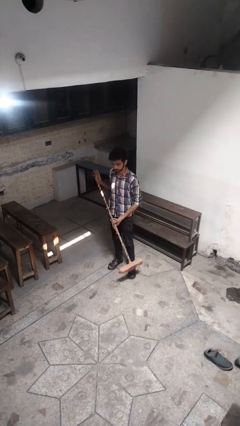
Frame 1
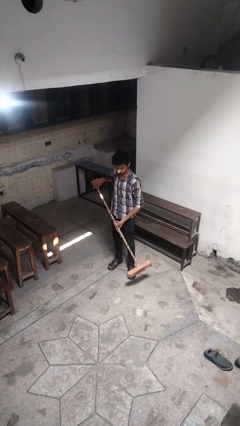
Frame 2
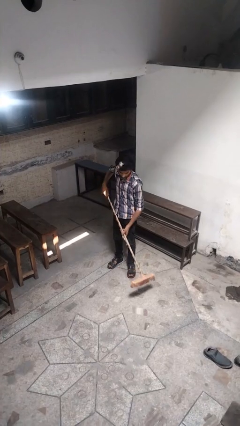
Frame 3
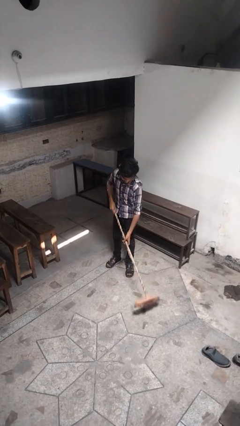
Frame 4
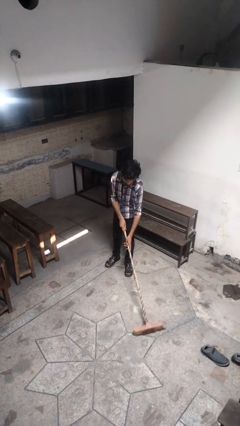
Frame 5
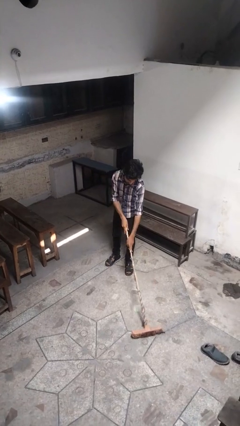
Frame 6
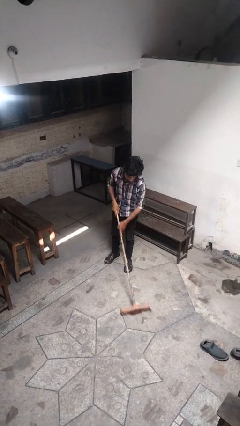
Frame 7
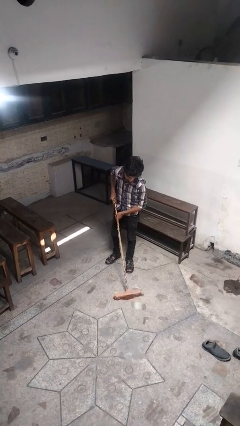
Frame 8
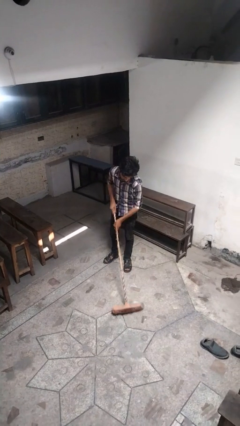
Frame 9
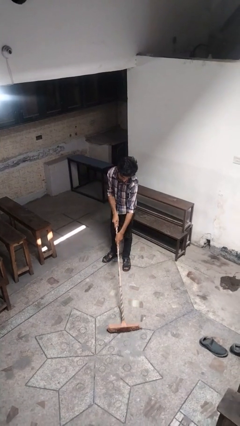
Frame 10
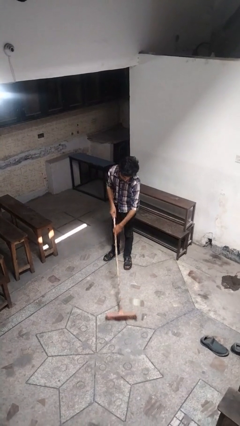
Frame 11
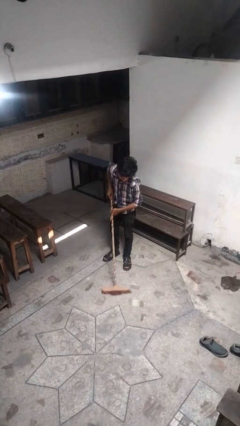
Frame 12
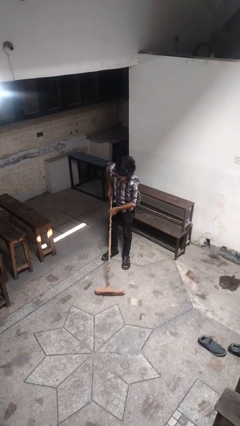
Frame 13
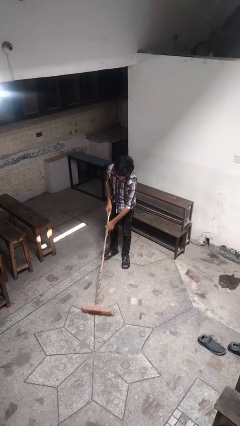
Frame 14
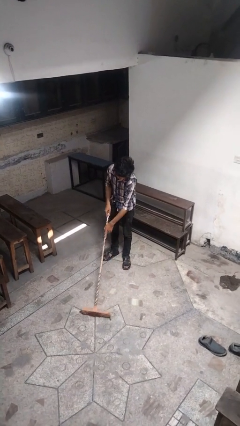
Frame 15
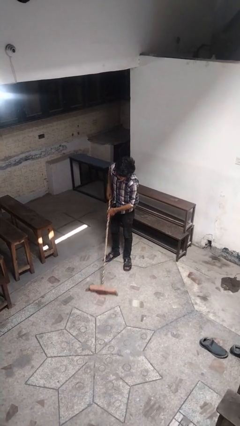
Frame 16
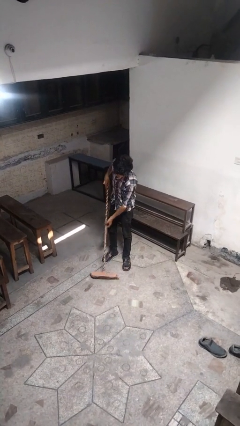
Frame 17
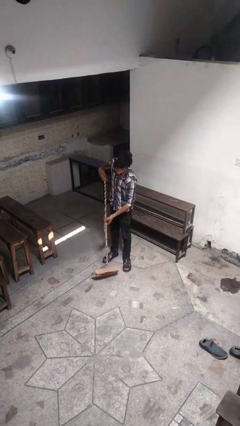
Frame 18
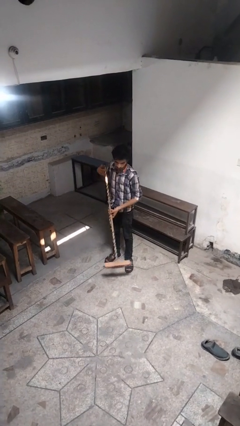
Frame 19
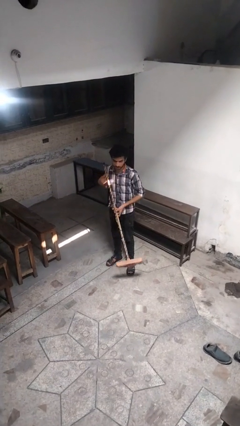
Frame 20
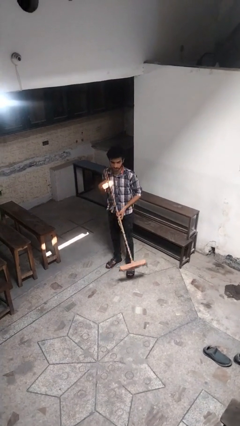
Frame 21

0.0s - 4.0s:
person sweeps floor

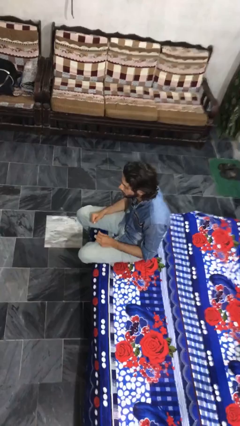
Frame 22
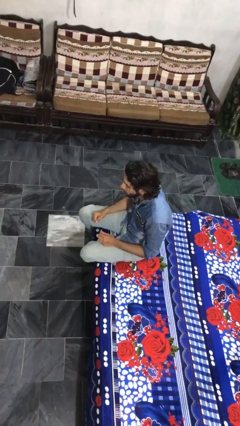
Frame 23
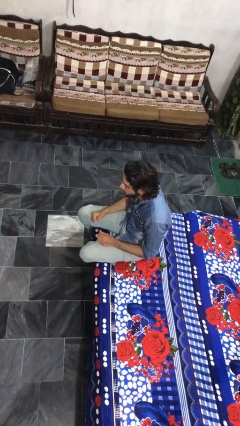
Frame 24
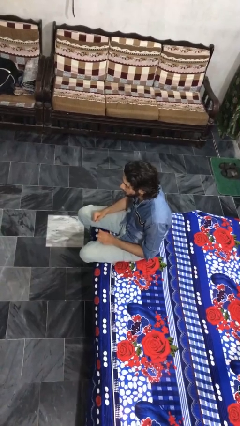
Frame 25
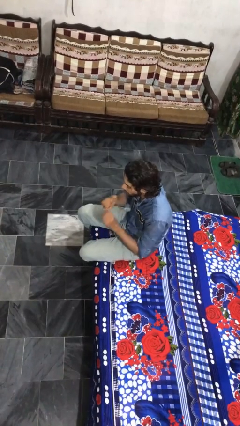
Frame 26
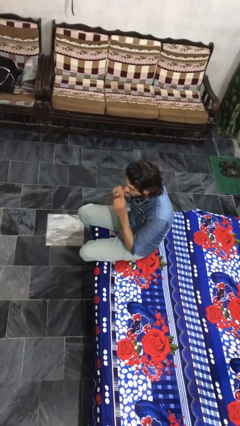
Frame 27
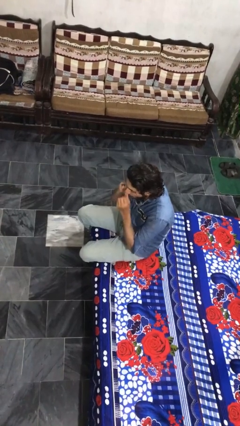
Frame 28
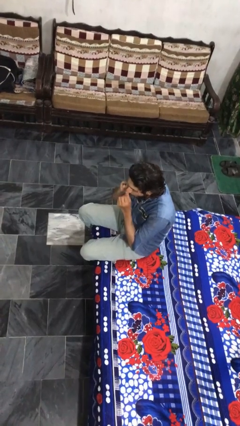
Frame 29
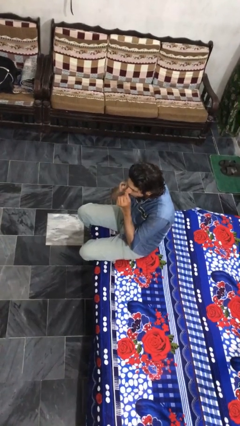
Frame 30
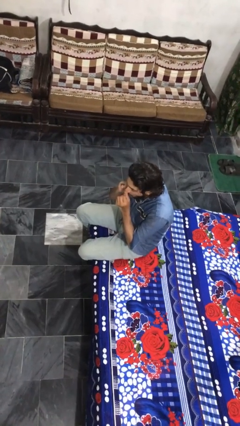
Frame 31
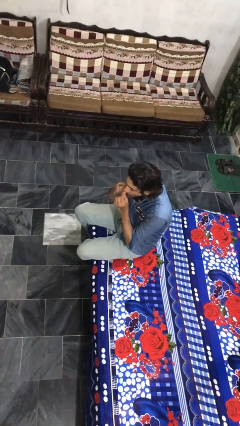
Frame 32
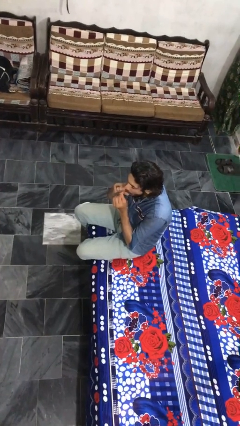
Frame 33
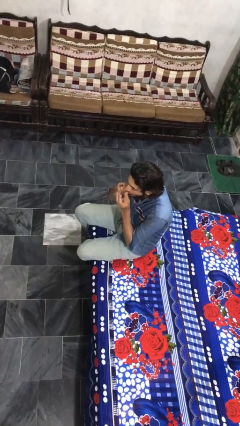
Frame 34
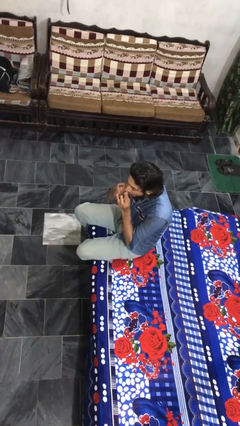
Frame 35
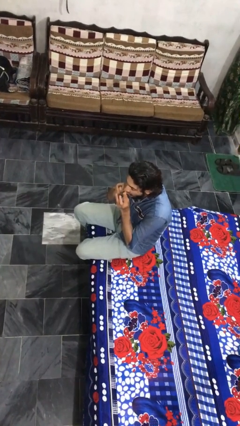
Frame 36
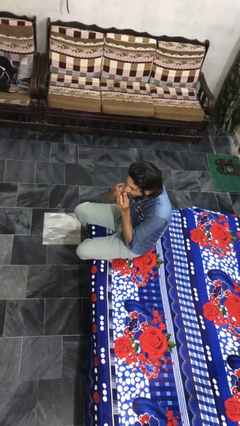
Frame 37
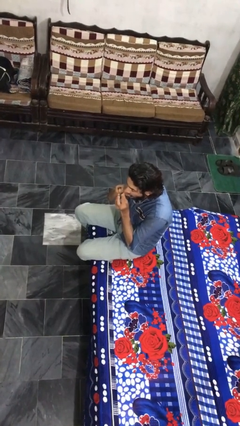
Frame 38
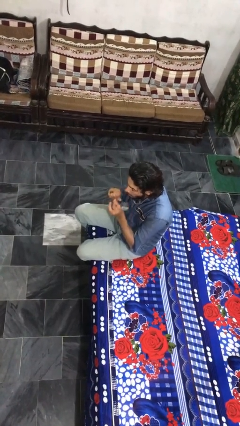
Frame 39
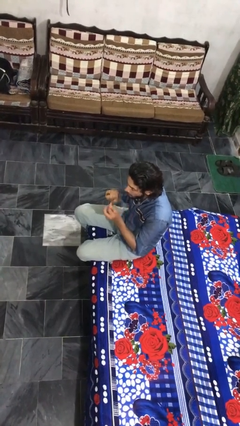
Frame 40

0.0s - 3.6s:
person flosses

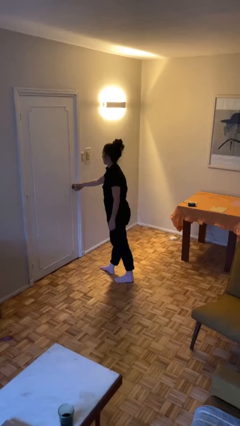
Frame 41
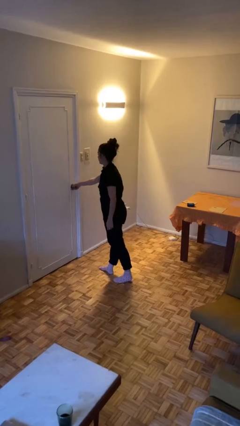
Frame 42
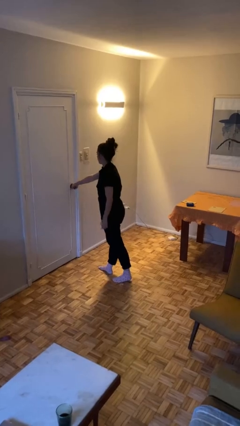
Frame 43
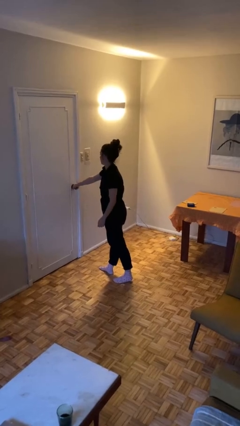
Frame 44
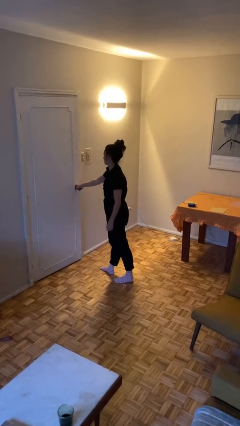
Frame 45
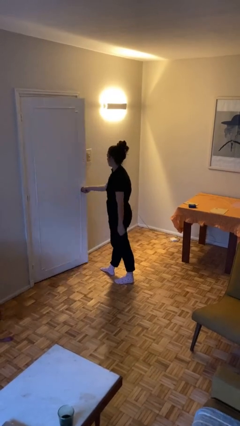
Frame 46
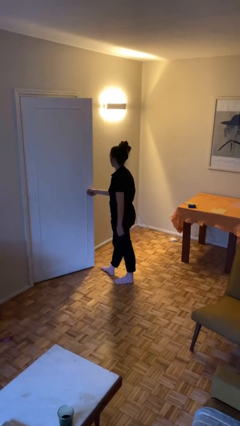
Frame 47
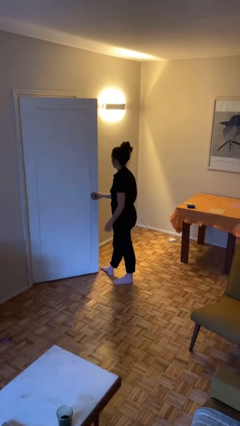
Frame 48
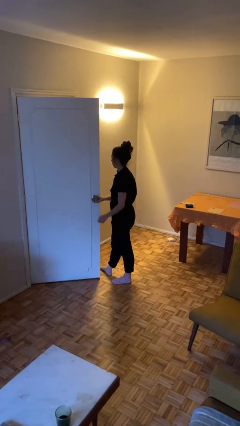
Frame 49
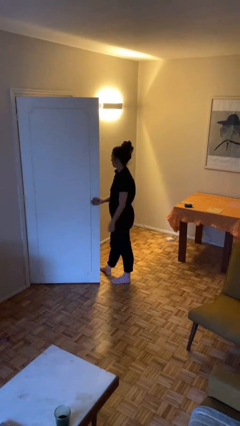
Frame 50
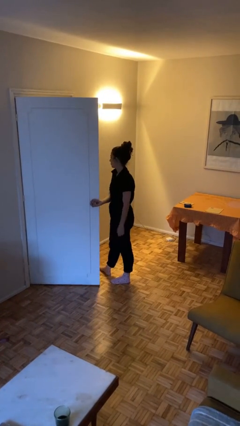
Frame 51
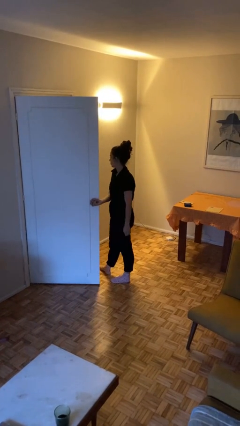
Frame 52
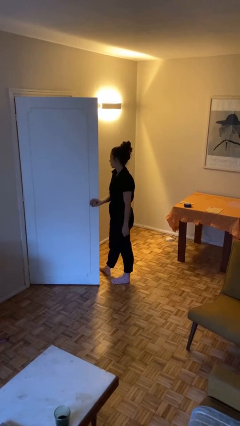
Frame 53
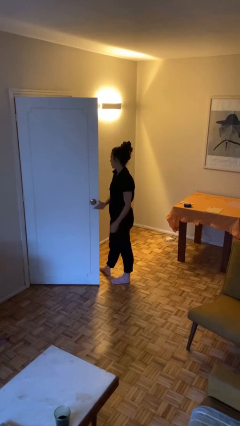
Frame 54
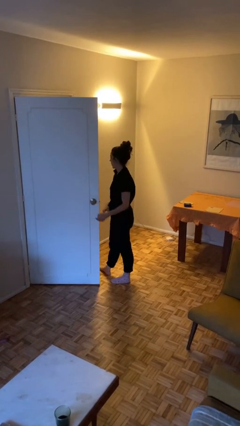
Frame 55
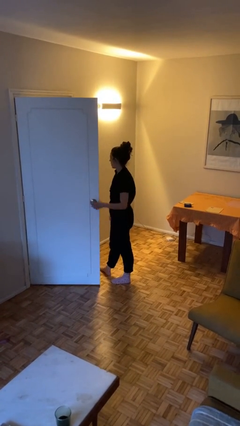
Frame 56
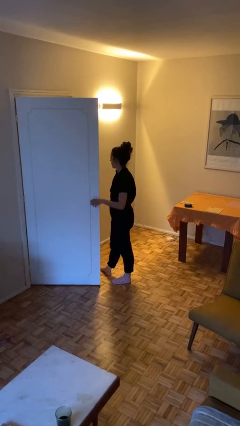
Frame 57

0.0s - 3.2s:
person opens facility door

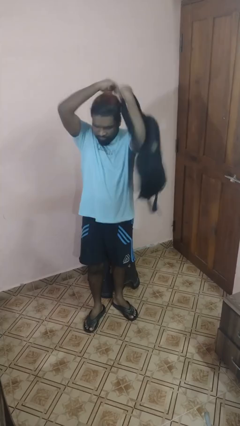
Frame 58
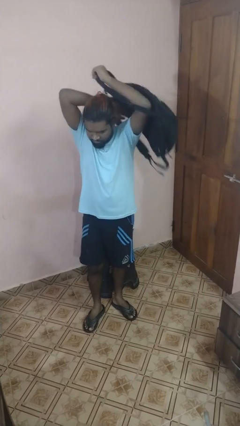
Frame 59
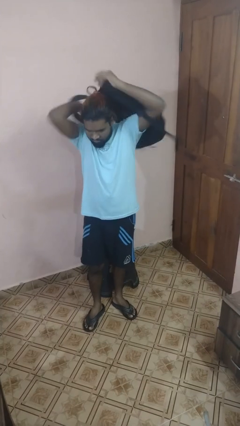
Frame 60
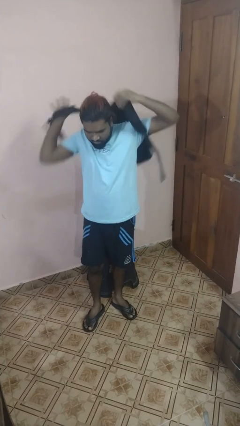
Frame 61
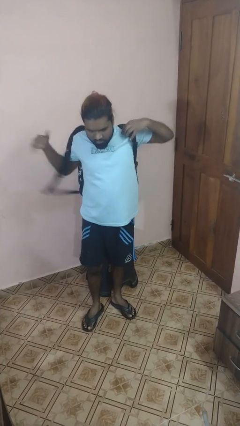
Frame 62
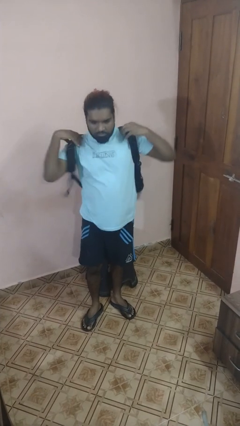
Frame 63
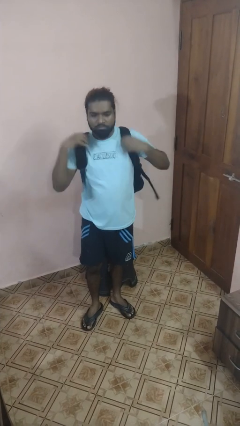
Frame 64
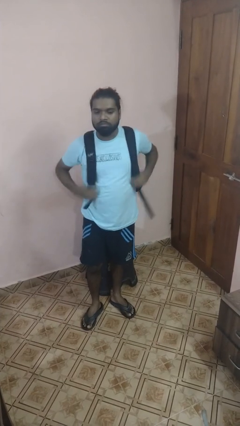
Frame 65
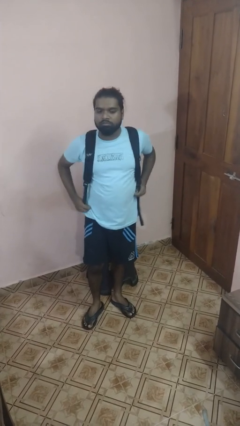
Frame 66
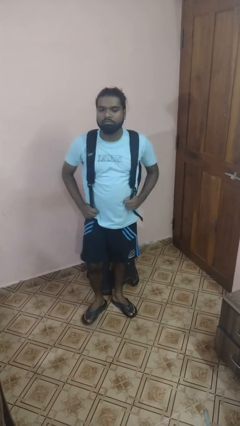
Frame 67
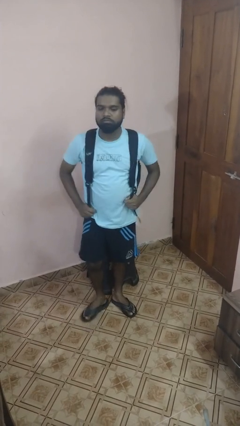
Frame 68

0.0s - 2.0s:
person puts on backpack

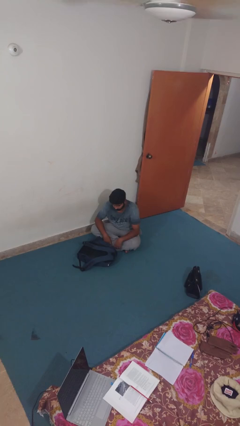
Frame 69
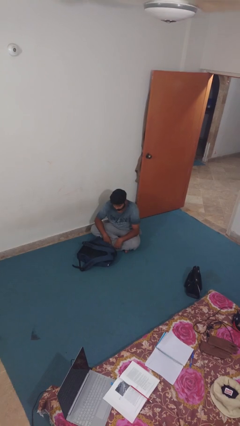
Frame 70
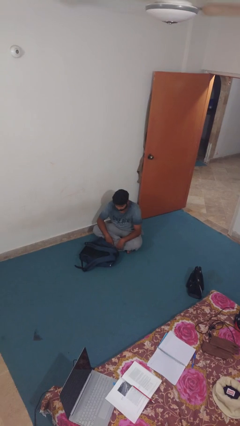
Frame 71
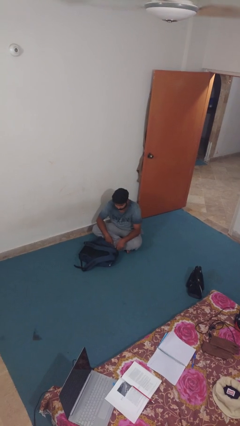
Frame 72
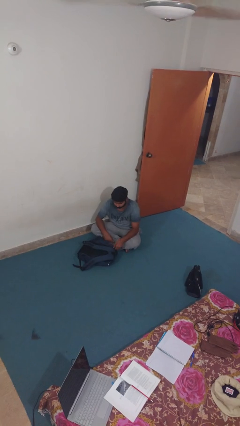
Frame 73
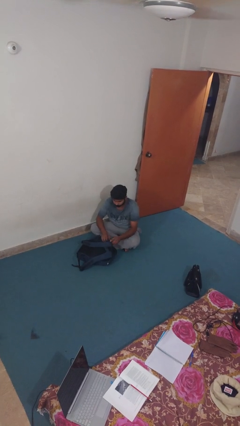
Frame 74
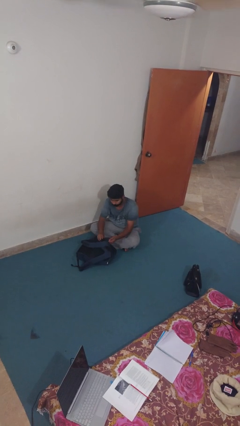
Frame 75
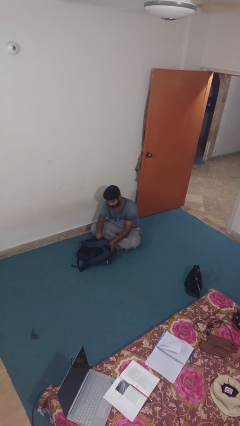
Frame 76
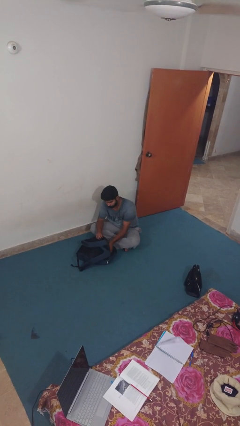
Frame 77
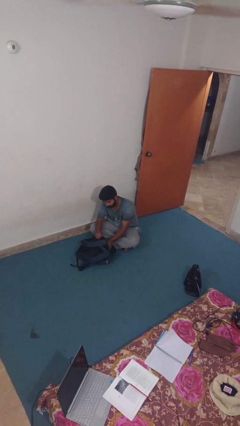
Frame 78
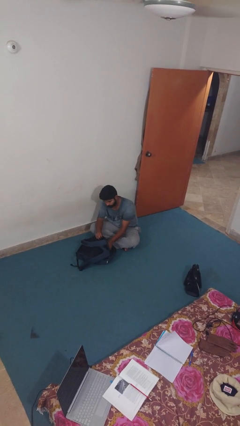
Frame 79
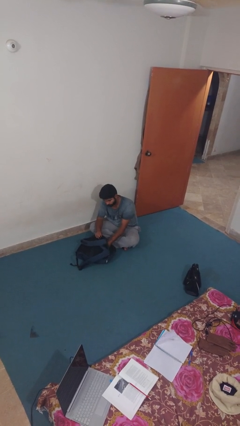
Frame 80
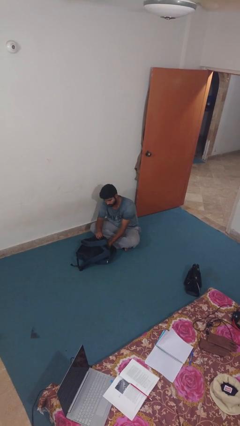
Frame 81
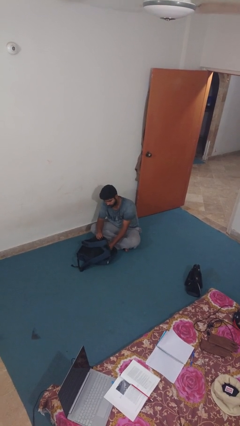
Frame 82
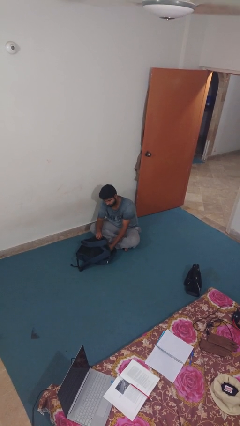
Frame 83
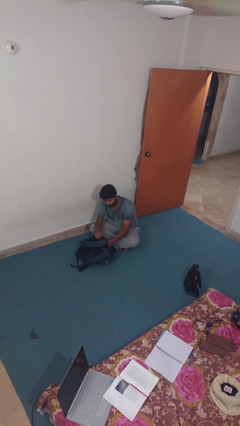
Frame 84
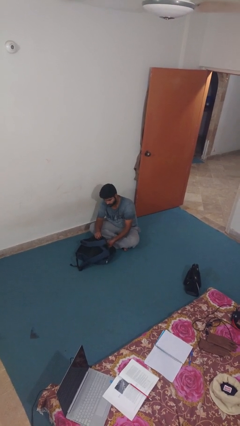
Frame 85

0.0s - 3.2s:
person searches in backpack

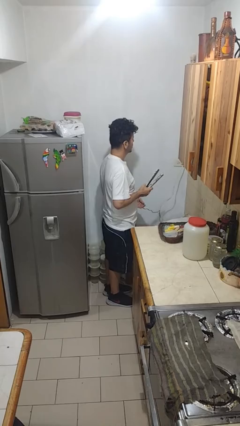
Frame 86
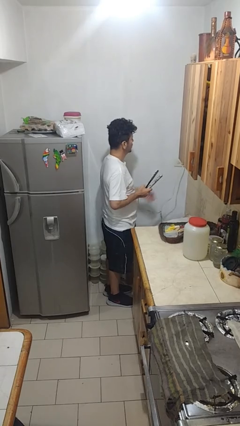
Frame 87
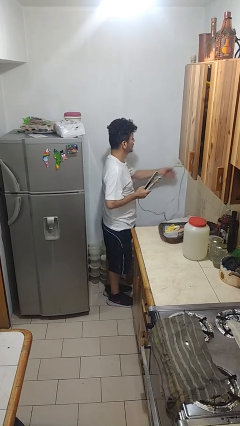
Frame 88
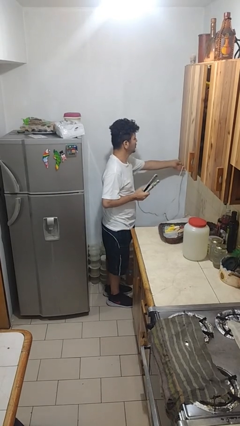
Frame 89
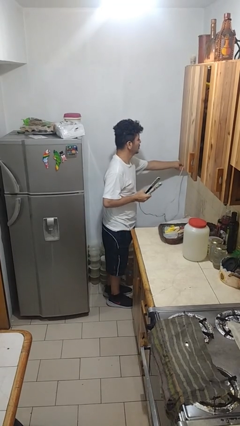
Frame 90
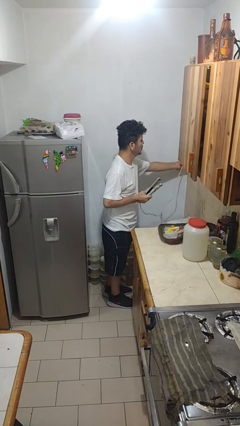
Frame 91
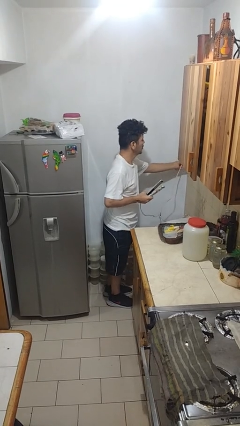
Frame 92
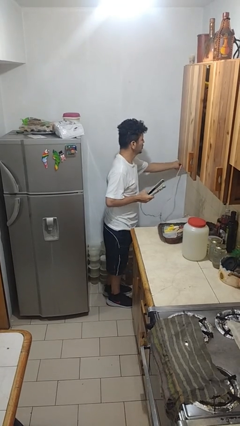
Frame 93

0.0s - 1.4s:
person unplugs from electrical socket

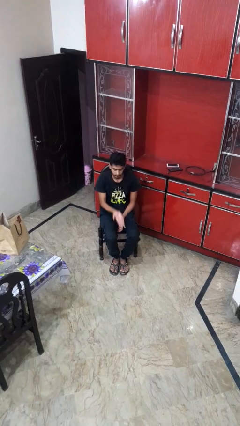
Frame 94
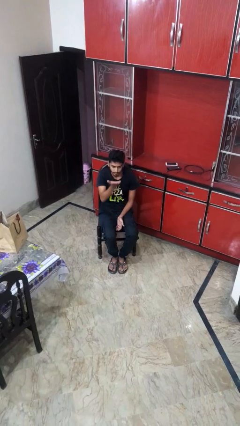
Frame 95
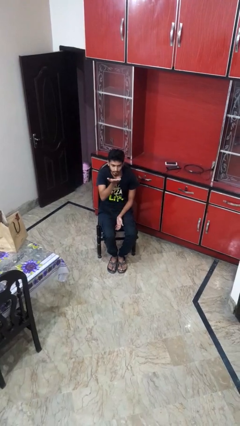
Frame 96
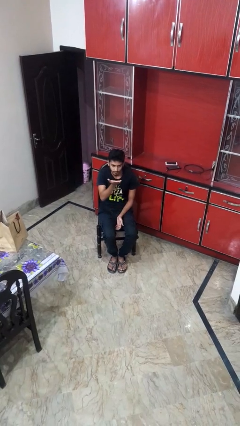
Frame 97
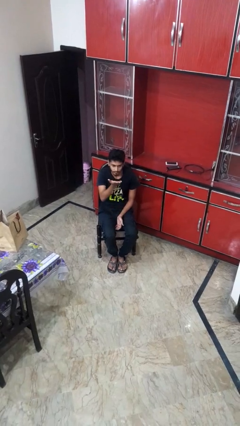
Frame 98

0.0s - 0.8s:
person gestures swipe up
